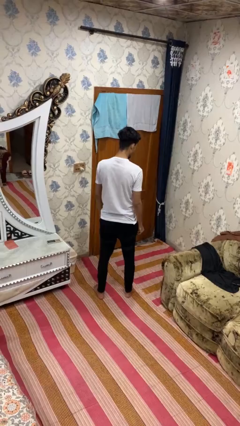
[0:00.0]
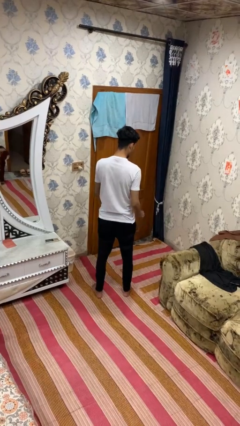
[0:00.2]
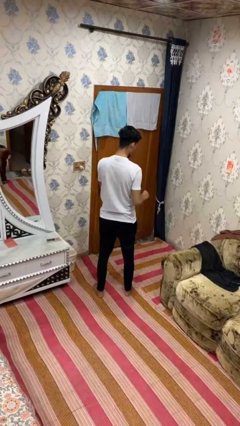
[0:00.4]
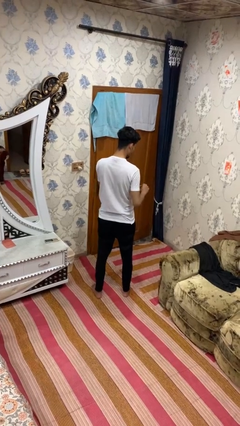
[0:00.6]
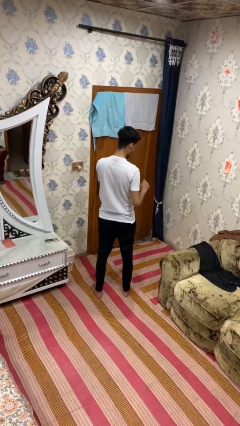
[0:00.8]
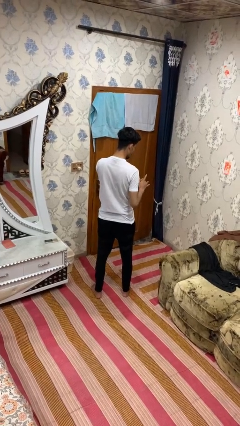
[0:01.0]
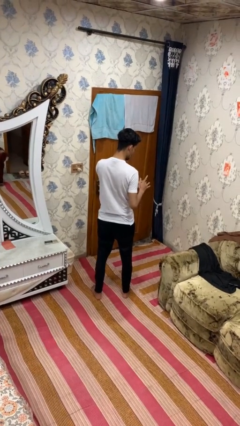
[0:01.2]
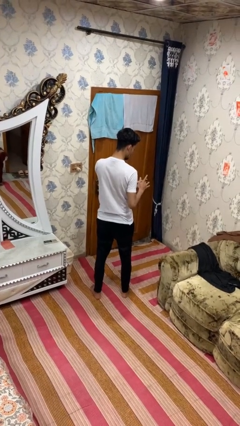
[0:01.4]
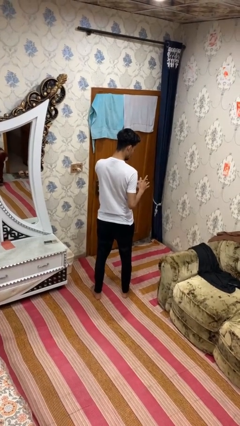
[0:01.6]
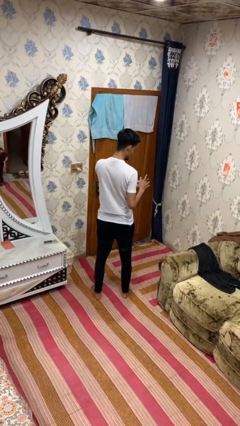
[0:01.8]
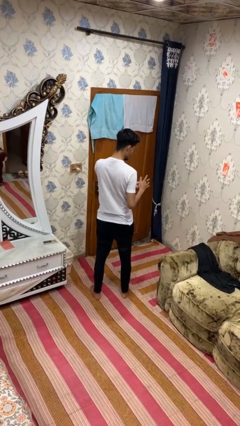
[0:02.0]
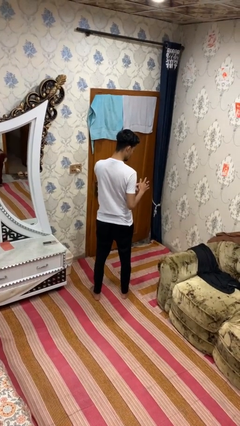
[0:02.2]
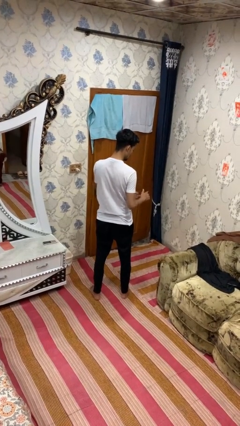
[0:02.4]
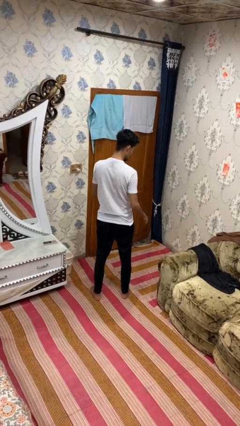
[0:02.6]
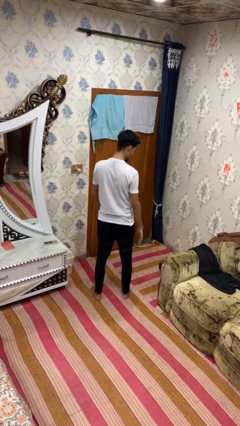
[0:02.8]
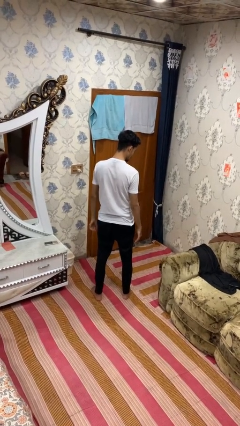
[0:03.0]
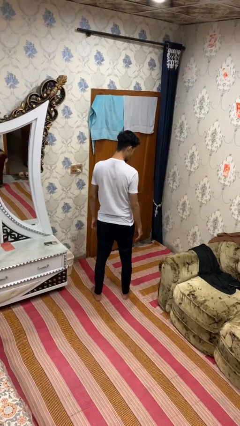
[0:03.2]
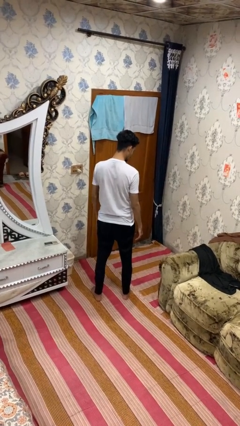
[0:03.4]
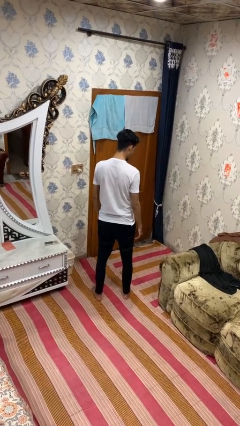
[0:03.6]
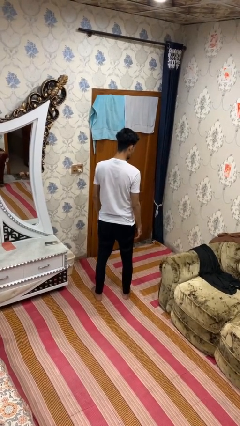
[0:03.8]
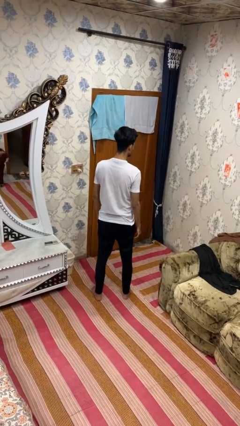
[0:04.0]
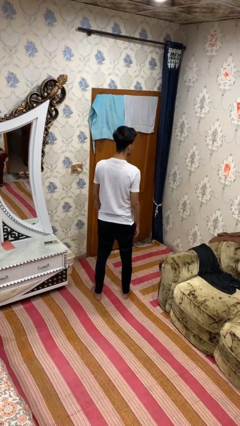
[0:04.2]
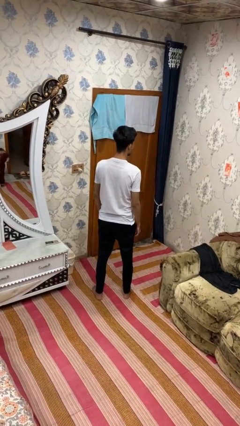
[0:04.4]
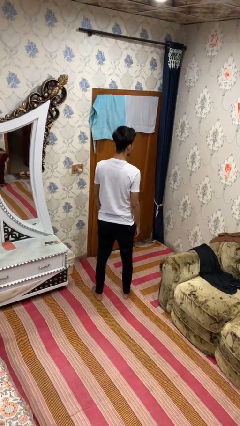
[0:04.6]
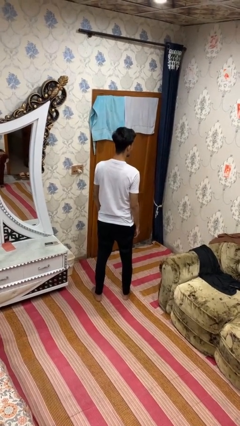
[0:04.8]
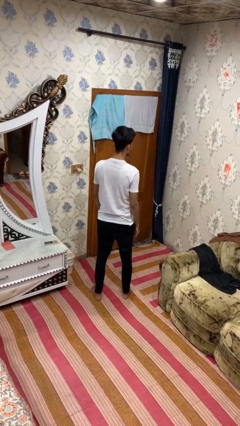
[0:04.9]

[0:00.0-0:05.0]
person puts on ring

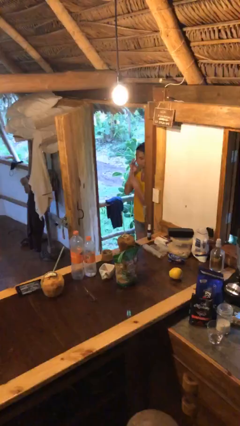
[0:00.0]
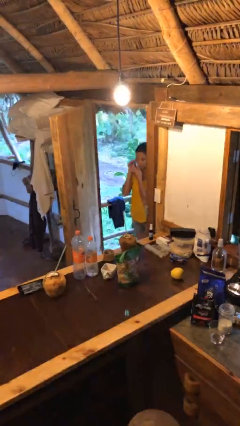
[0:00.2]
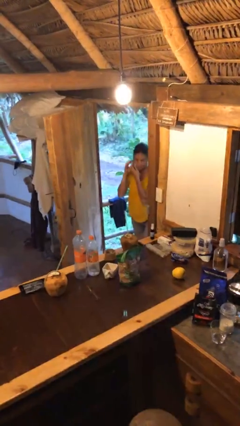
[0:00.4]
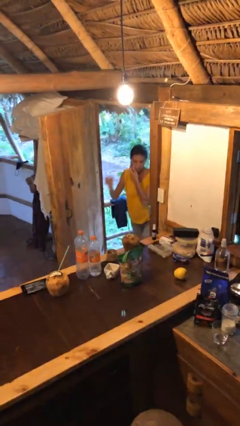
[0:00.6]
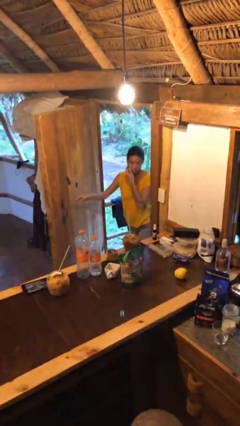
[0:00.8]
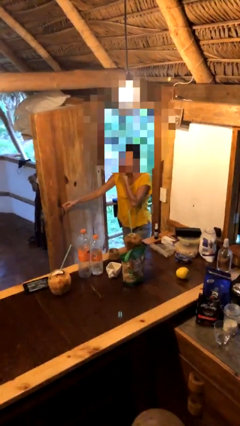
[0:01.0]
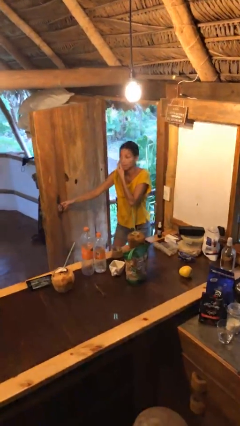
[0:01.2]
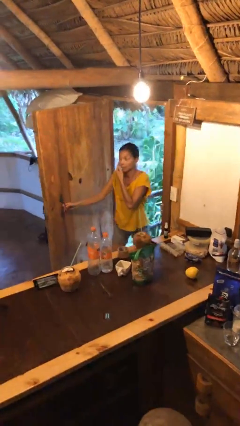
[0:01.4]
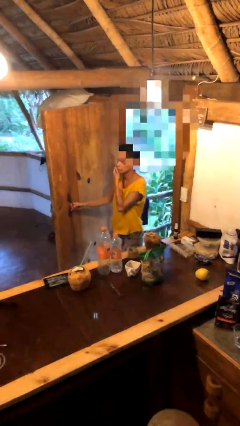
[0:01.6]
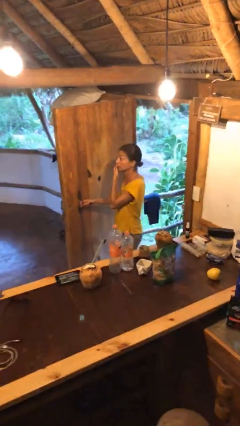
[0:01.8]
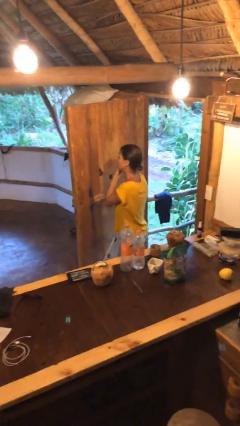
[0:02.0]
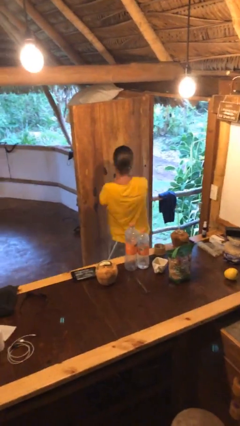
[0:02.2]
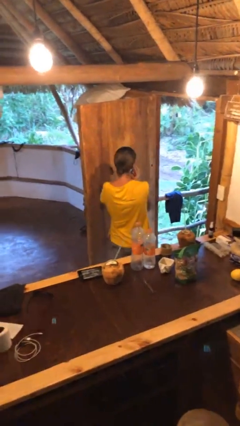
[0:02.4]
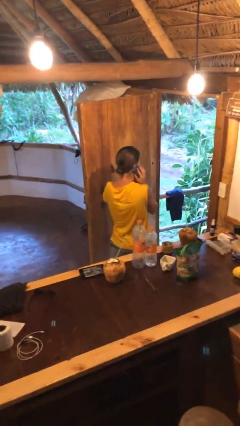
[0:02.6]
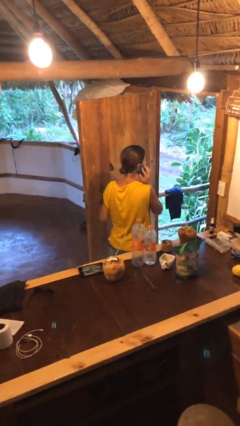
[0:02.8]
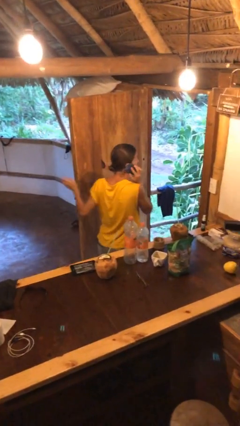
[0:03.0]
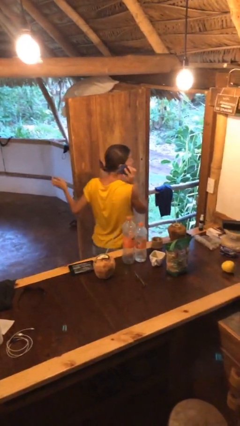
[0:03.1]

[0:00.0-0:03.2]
person enters scene through structure

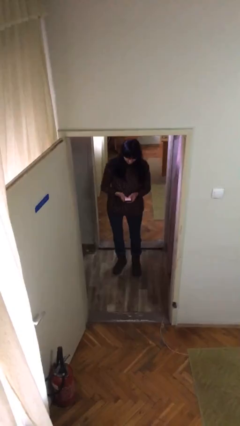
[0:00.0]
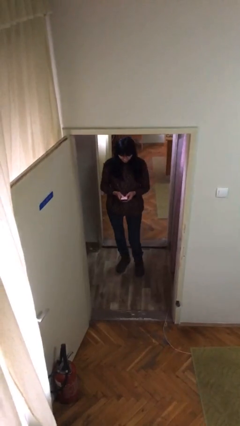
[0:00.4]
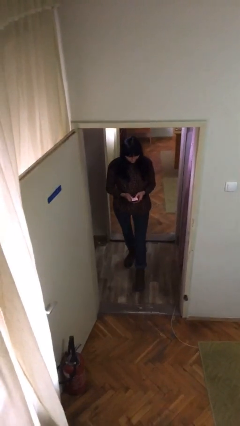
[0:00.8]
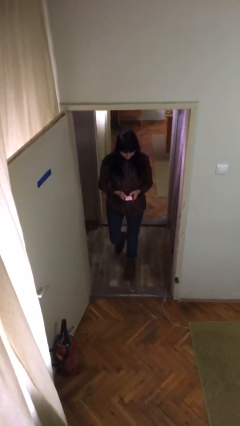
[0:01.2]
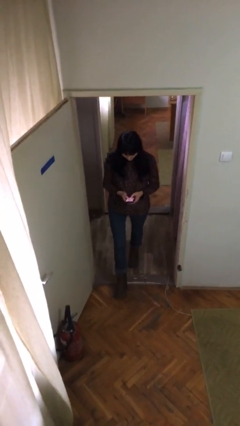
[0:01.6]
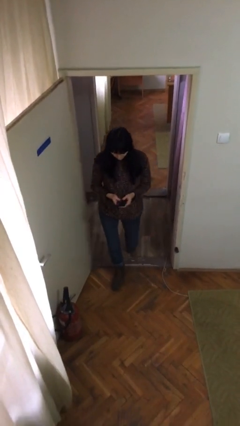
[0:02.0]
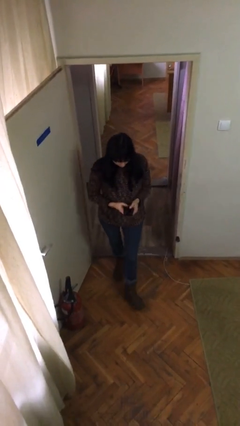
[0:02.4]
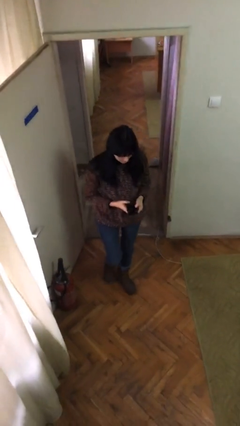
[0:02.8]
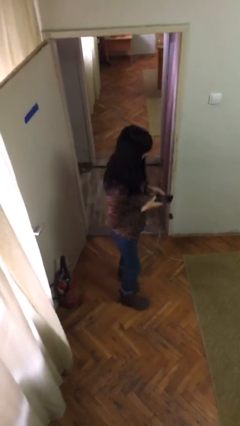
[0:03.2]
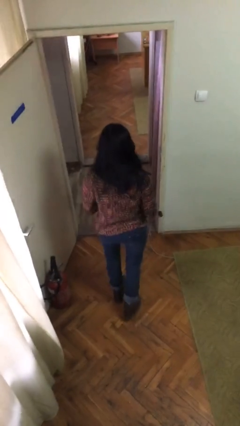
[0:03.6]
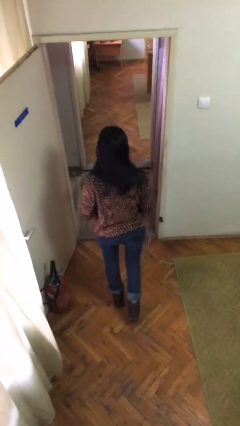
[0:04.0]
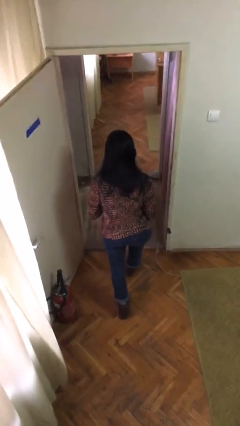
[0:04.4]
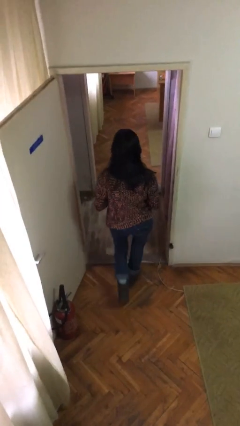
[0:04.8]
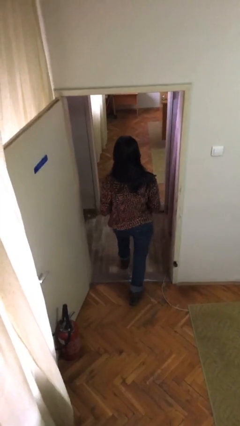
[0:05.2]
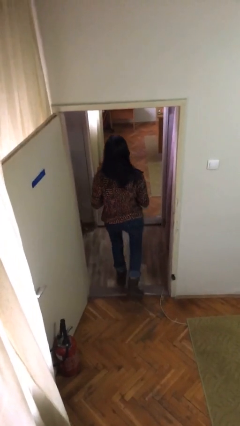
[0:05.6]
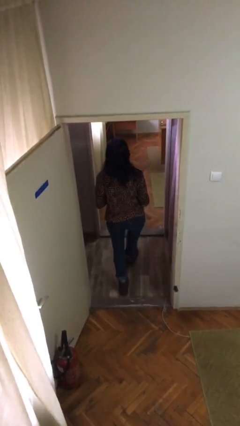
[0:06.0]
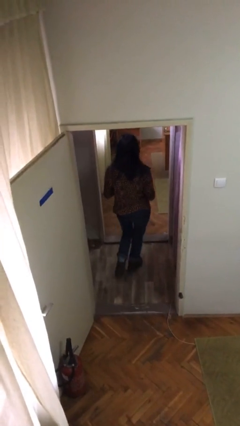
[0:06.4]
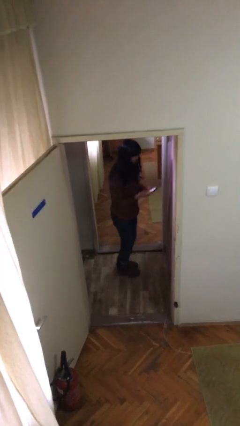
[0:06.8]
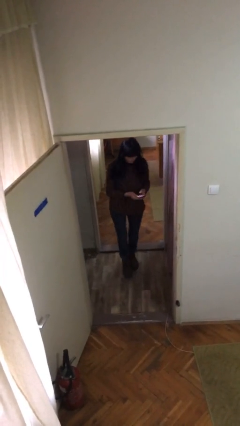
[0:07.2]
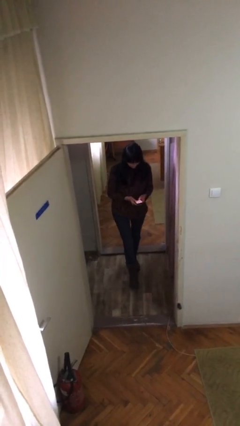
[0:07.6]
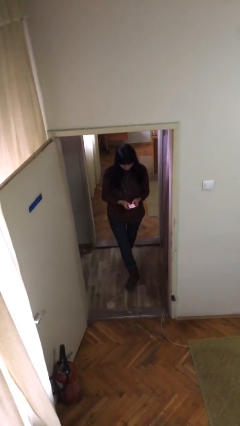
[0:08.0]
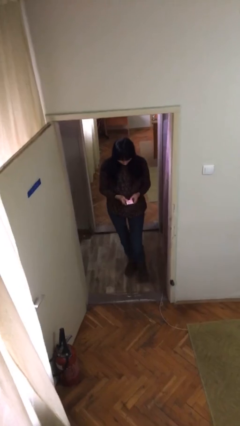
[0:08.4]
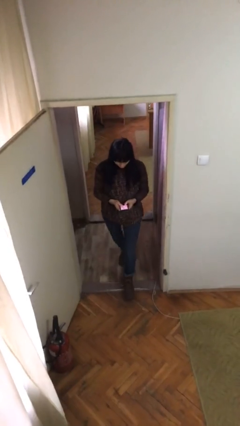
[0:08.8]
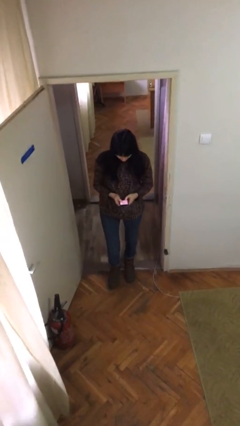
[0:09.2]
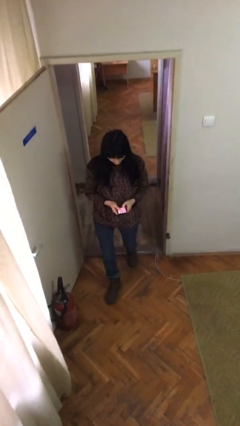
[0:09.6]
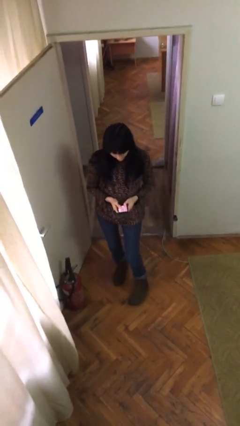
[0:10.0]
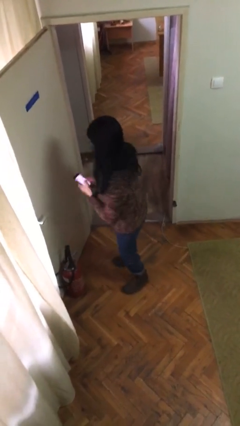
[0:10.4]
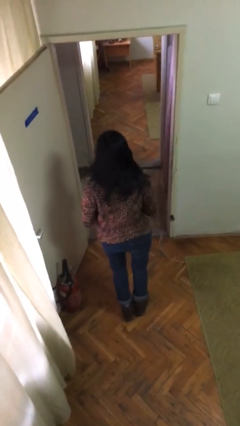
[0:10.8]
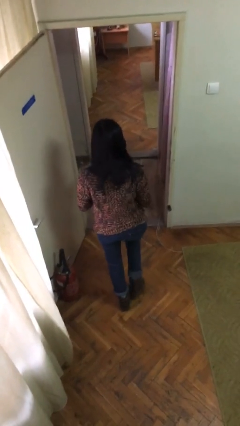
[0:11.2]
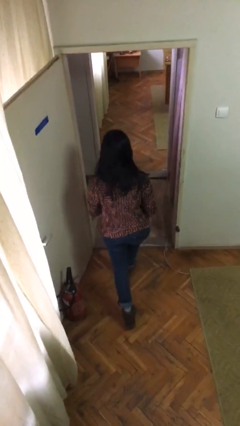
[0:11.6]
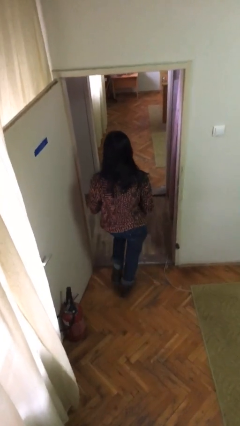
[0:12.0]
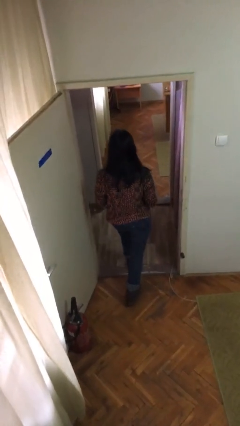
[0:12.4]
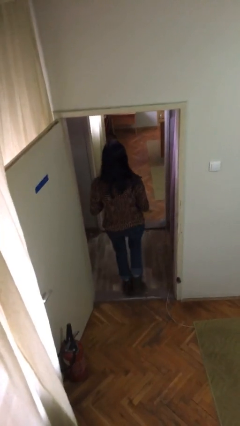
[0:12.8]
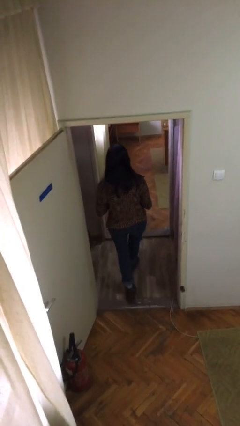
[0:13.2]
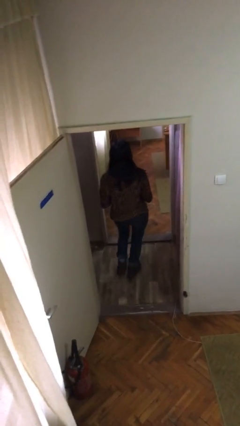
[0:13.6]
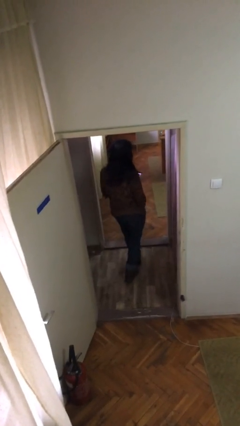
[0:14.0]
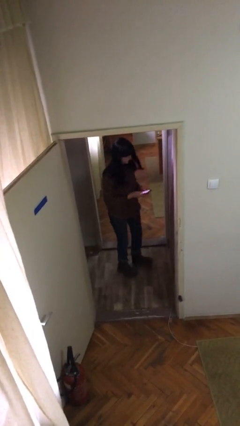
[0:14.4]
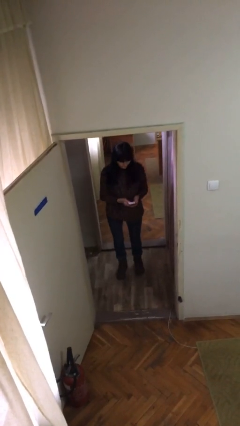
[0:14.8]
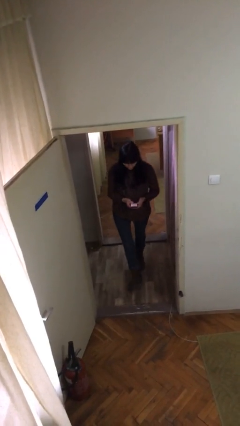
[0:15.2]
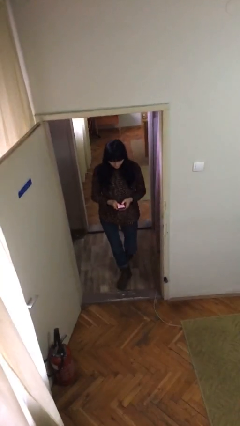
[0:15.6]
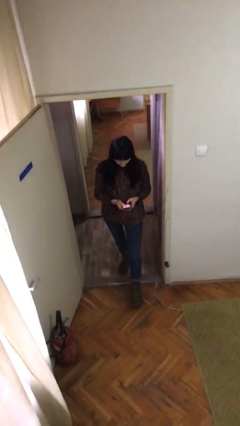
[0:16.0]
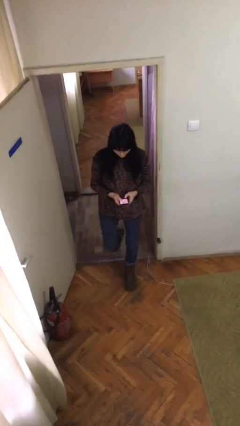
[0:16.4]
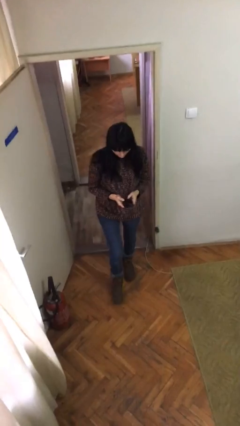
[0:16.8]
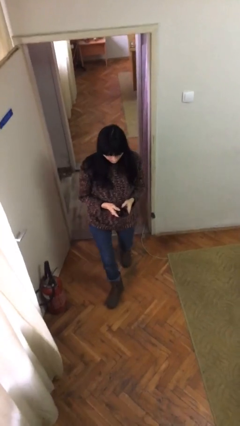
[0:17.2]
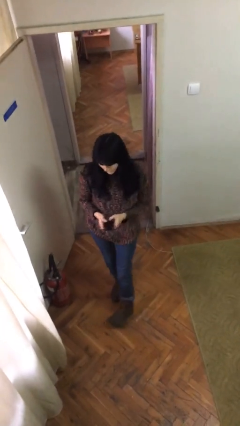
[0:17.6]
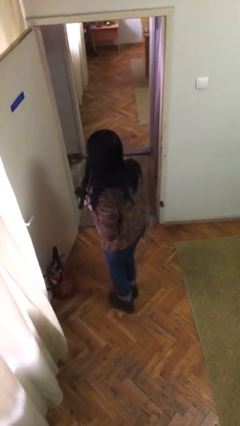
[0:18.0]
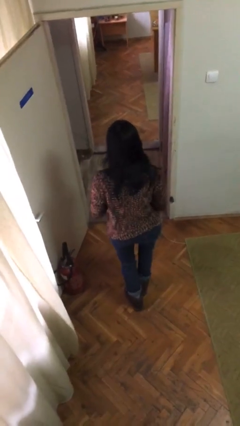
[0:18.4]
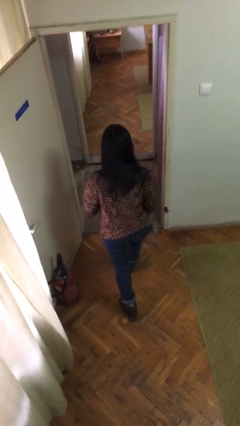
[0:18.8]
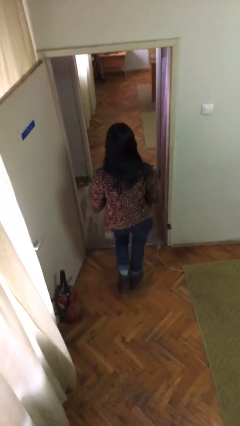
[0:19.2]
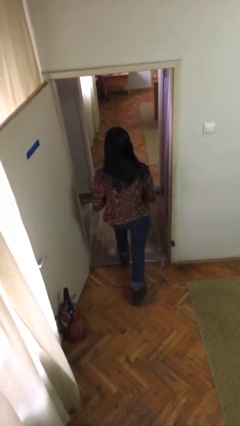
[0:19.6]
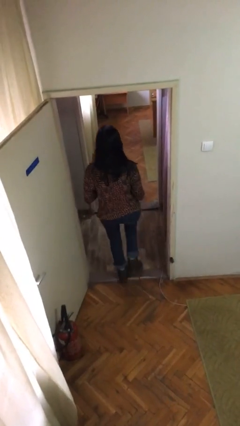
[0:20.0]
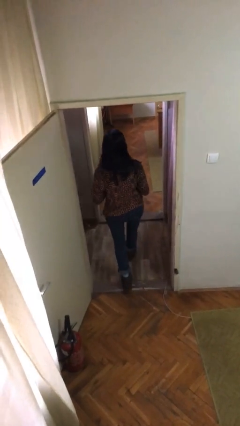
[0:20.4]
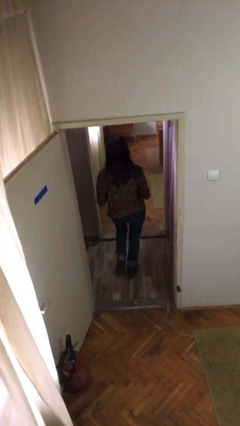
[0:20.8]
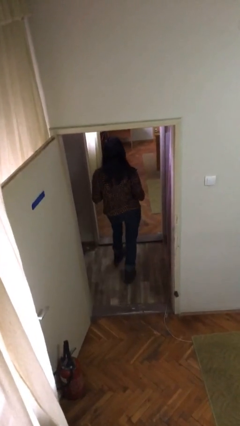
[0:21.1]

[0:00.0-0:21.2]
person texts on phone
